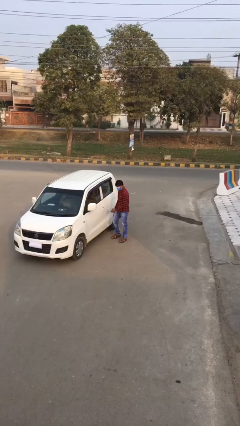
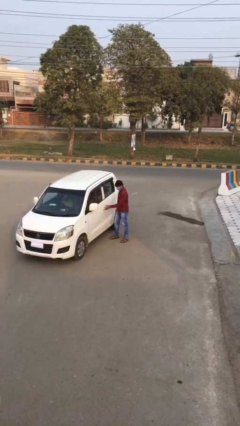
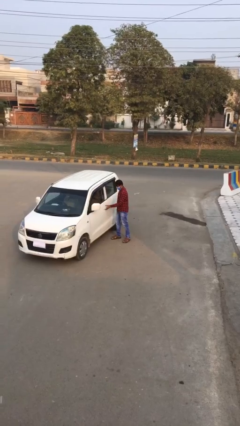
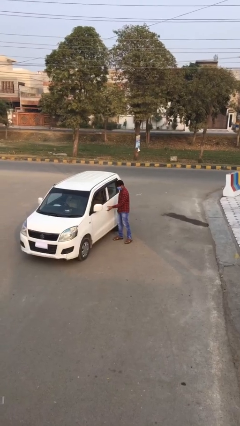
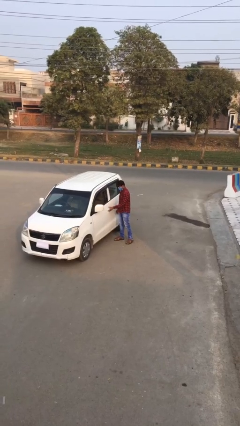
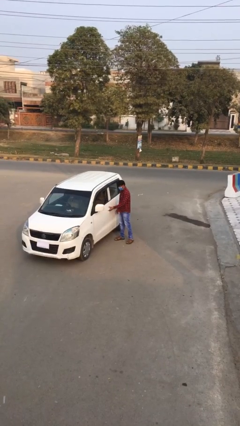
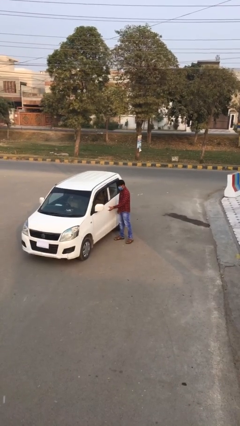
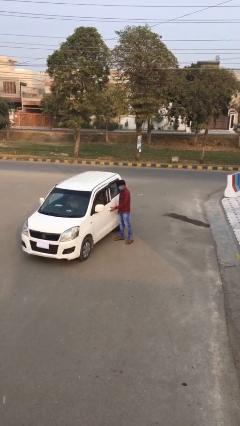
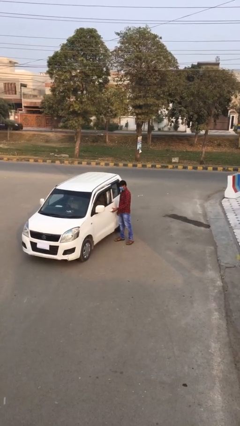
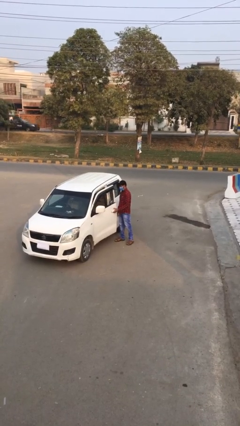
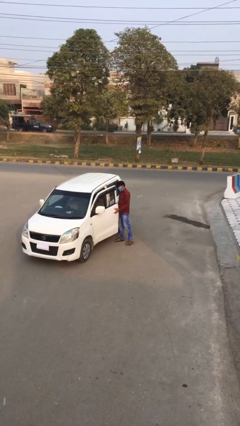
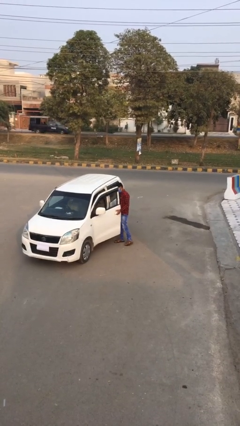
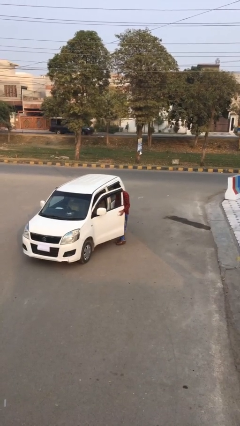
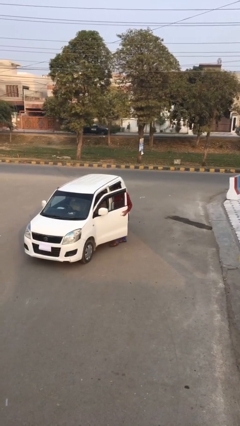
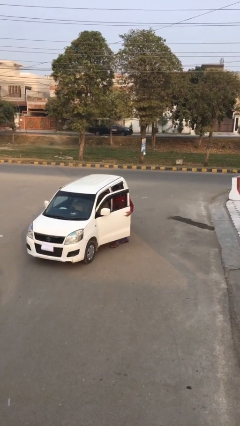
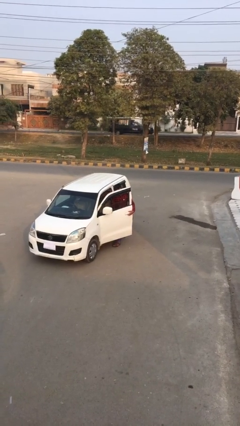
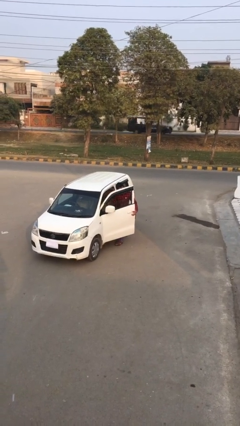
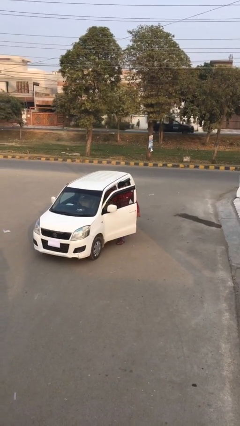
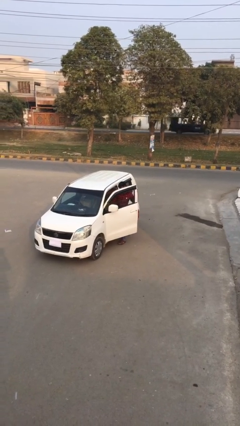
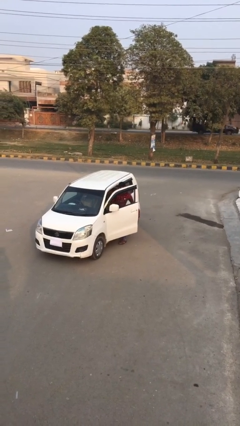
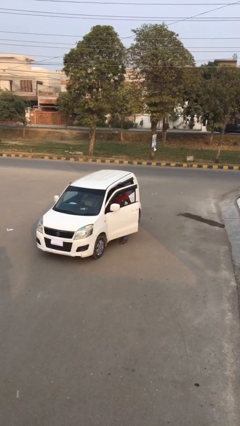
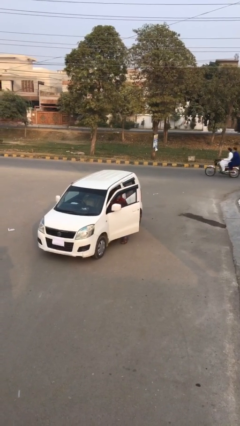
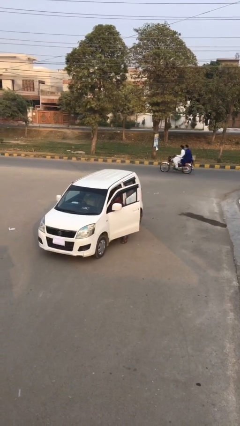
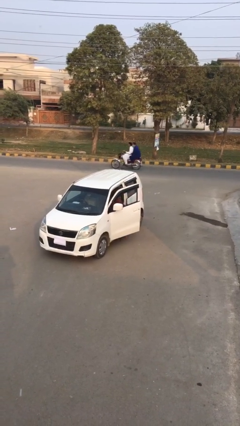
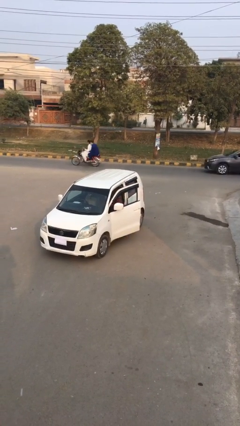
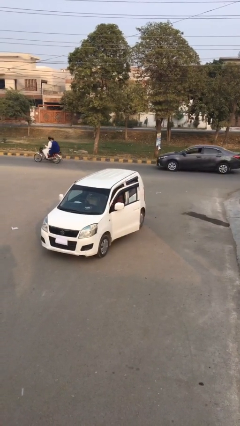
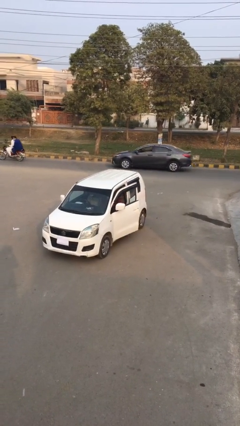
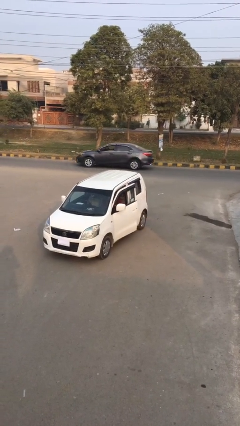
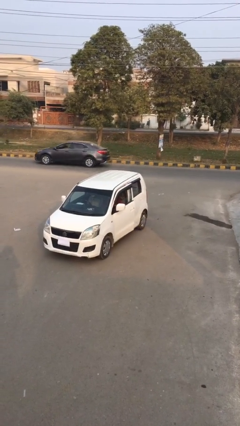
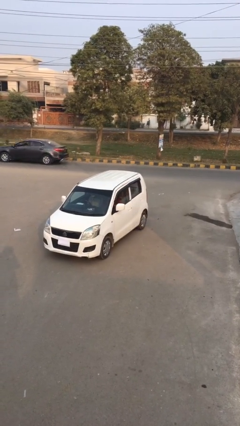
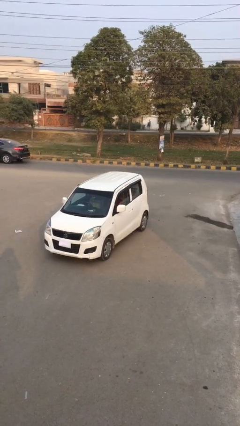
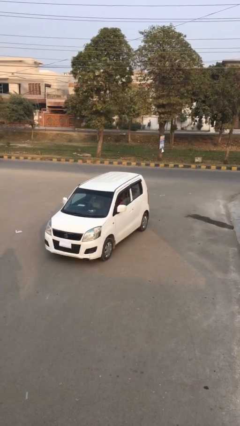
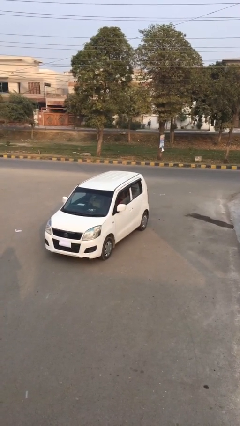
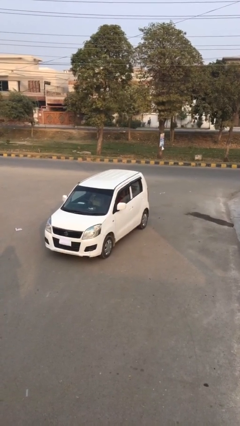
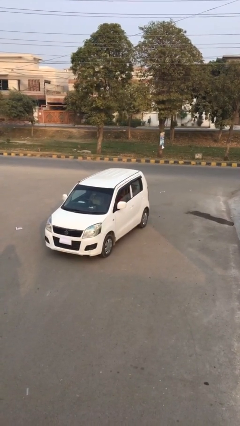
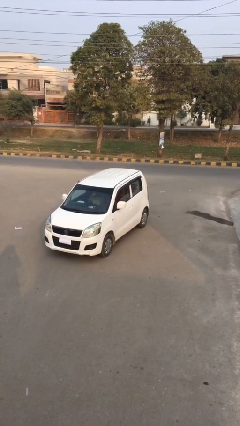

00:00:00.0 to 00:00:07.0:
person enters car

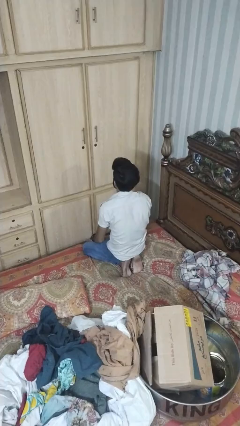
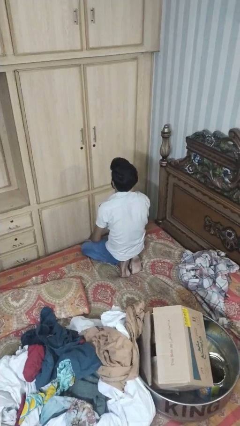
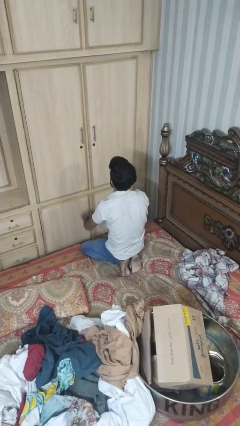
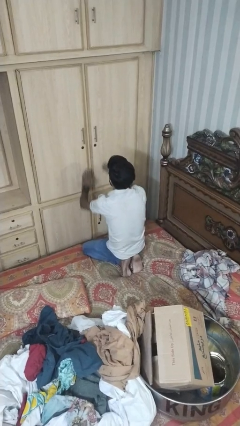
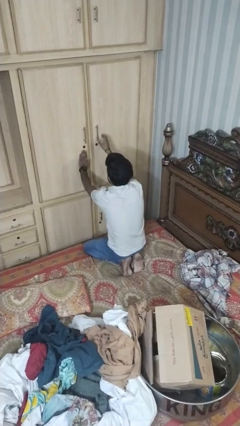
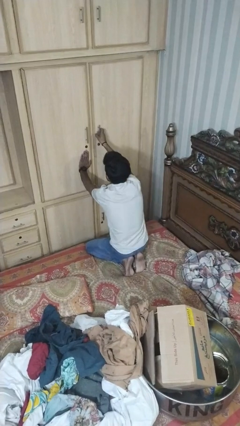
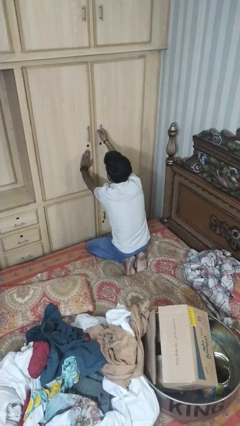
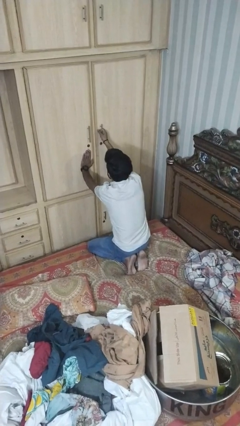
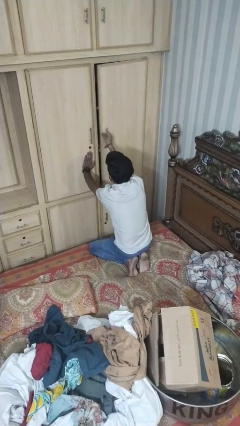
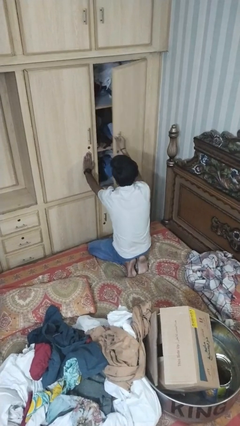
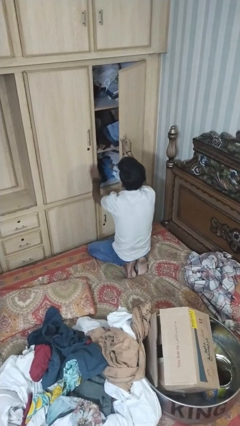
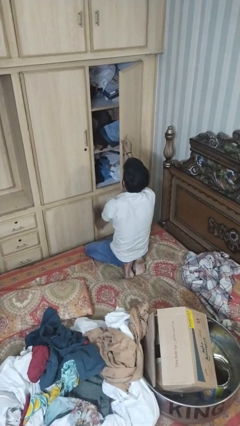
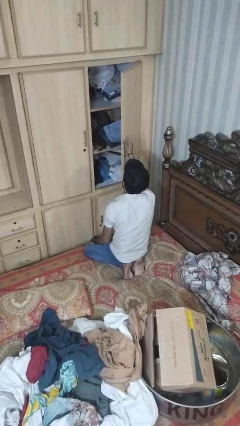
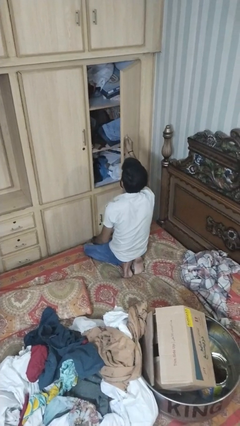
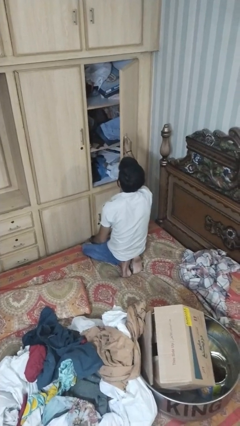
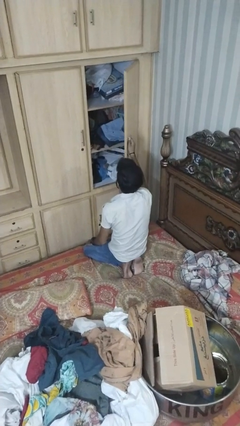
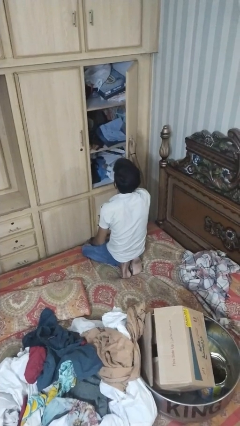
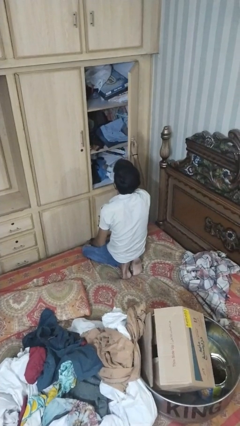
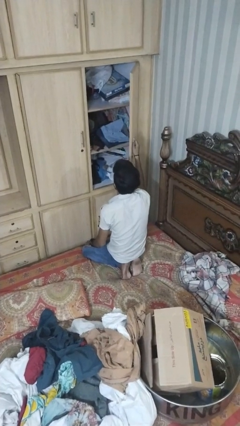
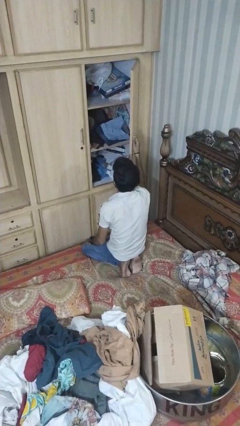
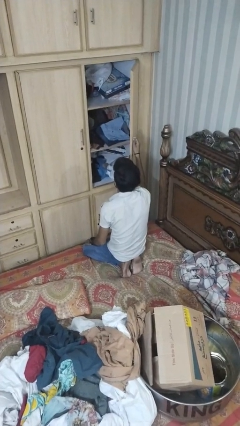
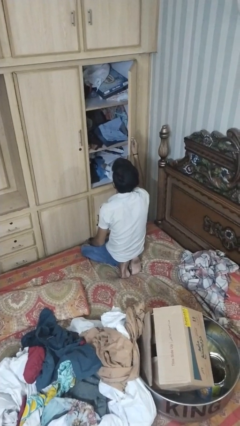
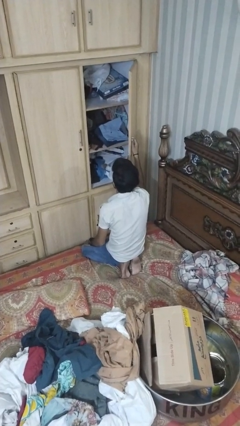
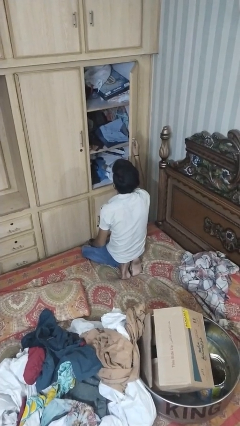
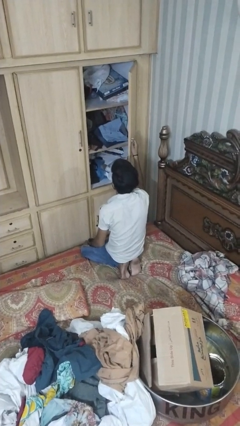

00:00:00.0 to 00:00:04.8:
person opens dresser drawer

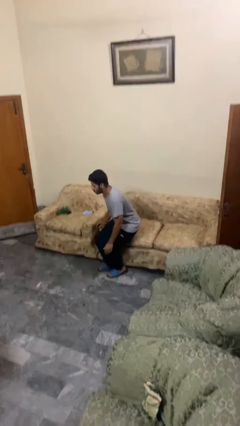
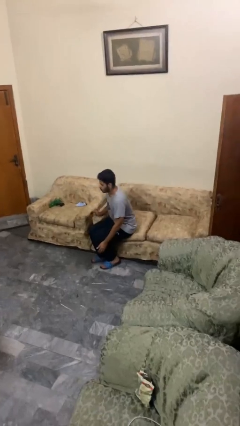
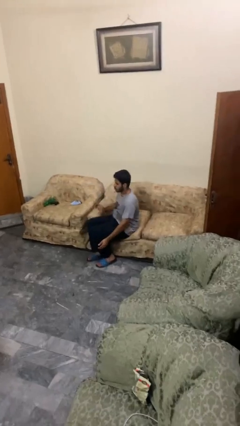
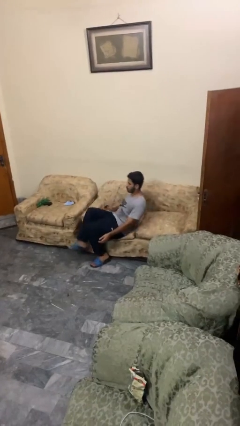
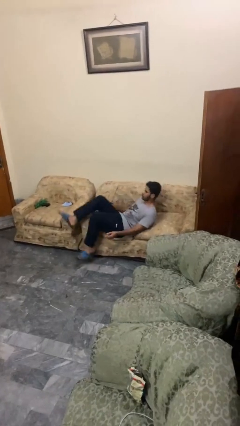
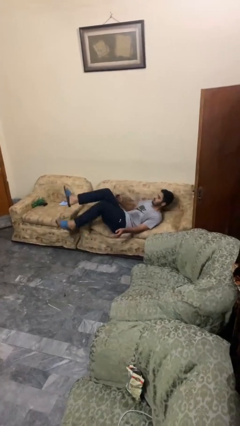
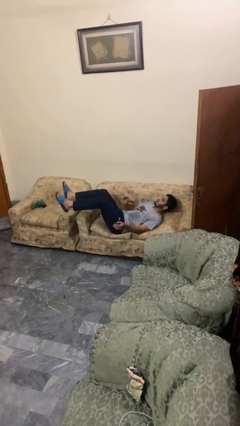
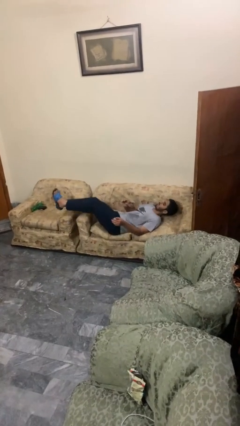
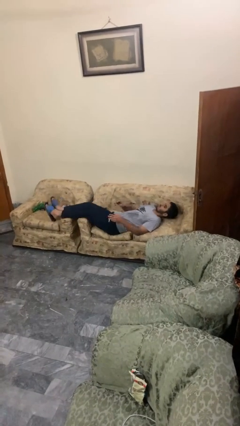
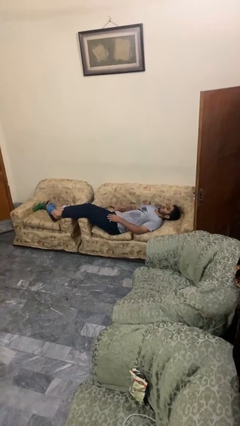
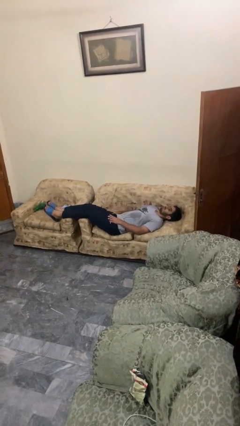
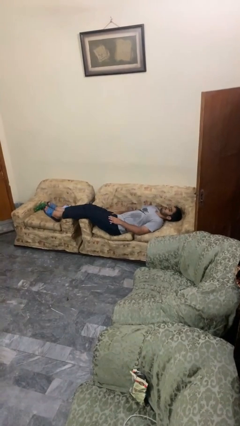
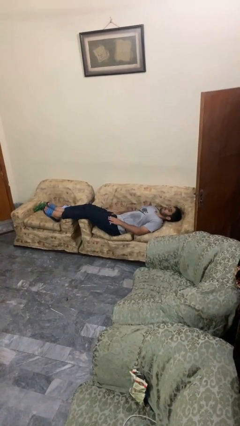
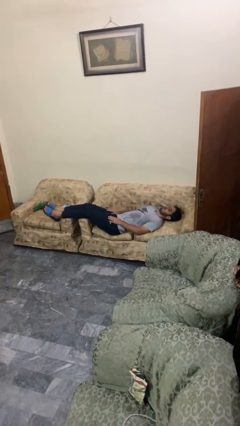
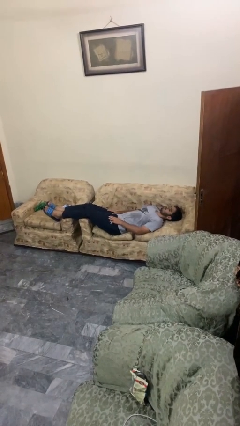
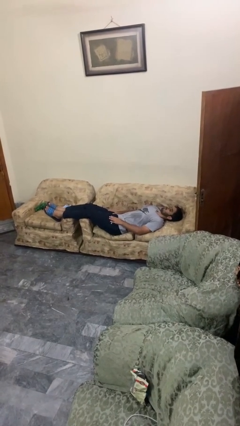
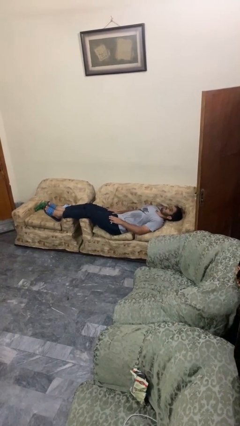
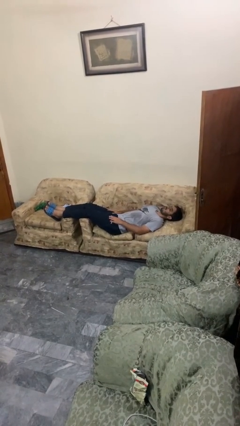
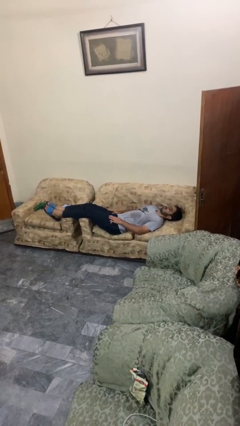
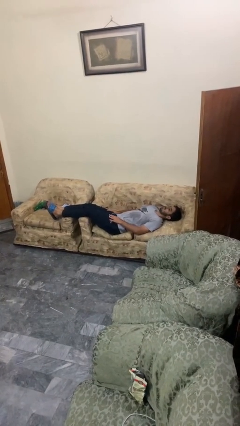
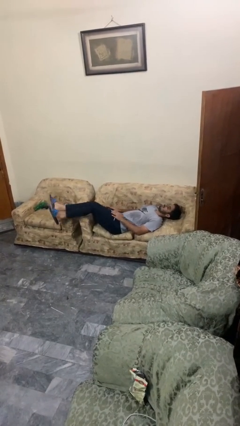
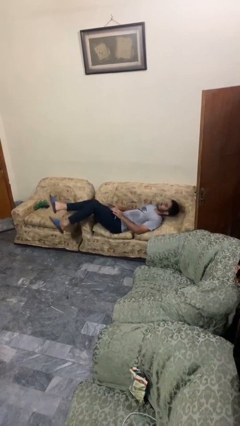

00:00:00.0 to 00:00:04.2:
person lies down on couch

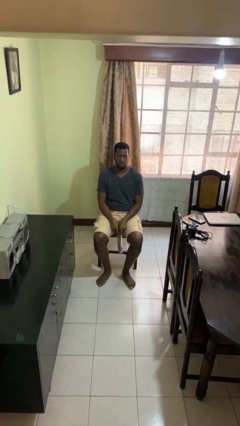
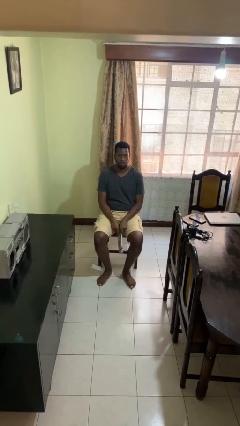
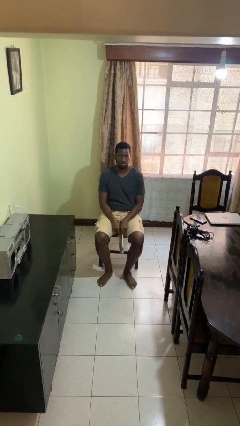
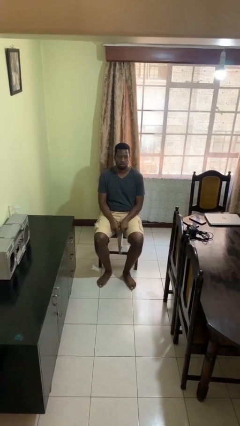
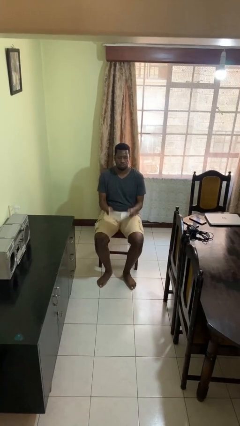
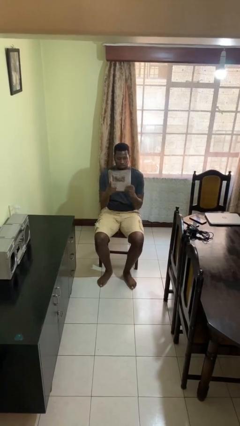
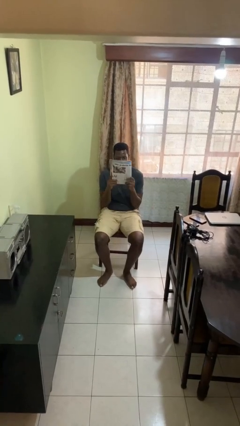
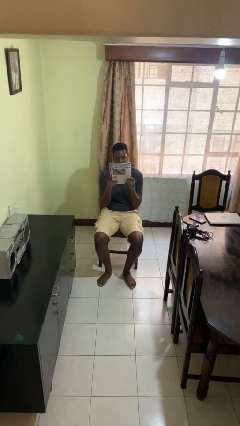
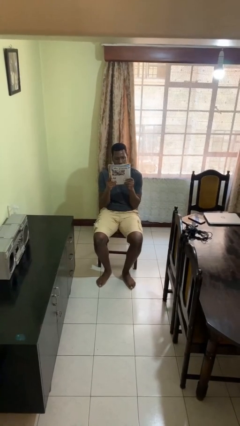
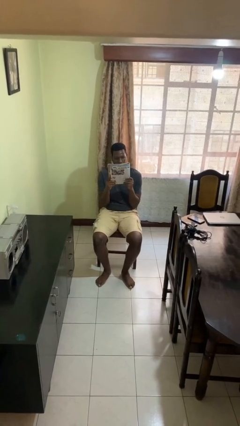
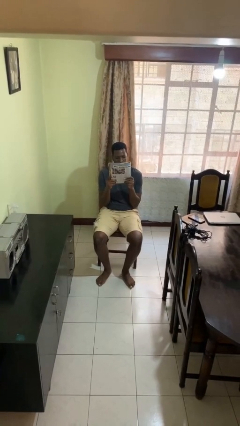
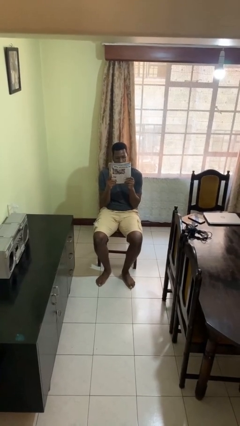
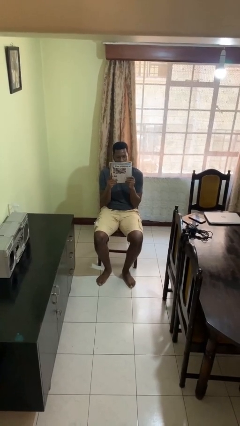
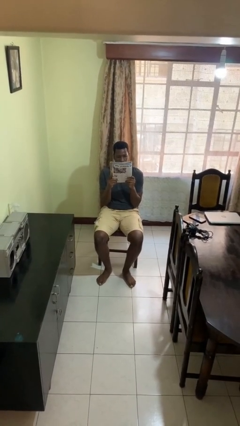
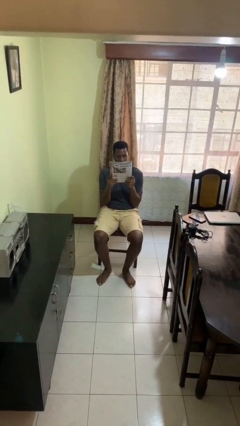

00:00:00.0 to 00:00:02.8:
person reads document
